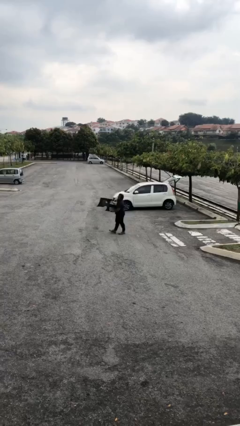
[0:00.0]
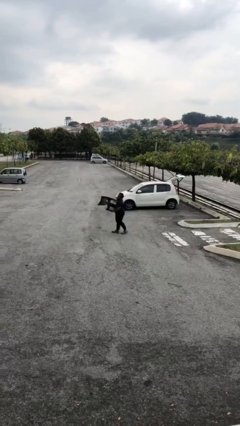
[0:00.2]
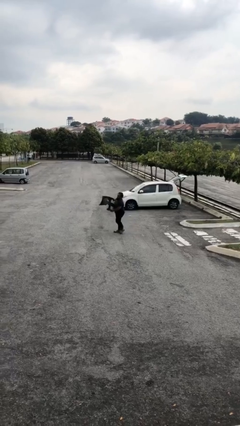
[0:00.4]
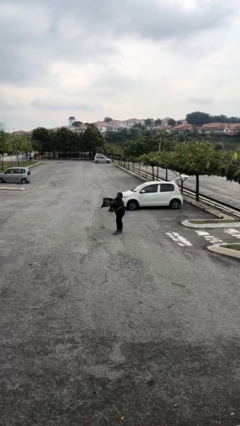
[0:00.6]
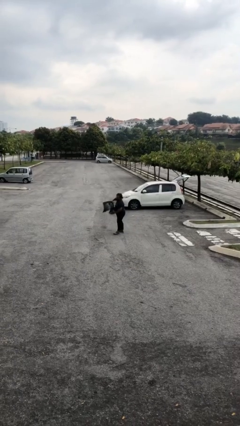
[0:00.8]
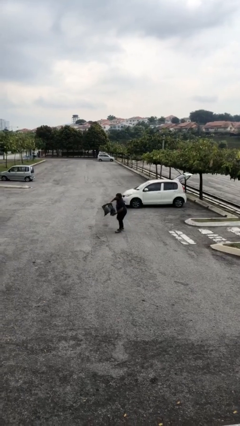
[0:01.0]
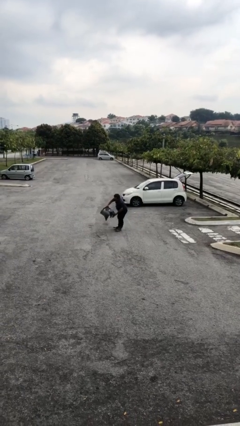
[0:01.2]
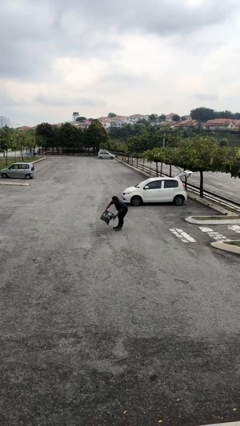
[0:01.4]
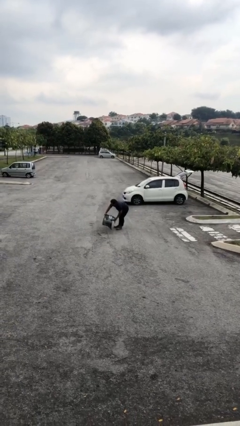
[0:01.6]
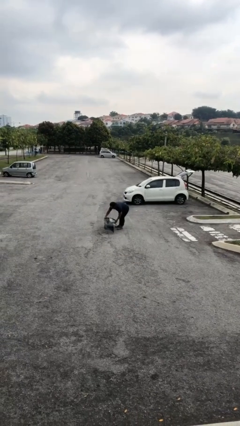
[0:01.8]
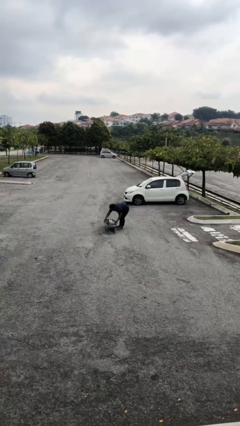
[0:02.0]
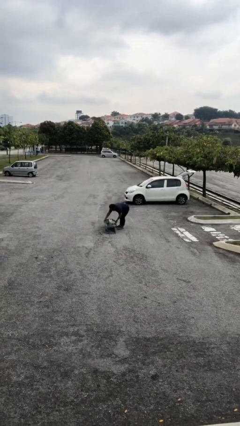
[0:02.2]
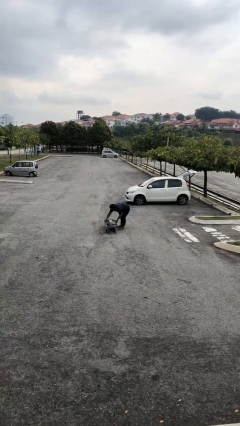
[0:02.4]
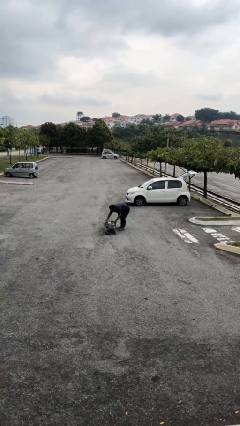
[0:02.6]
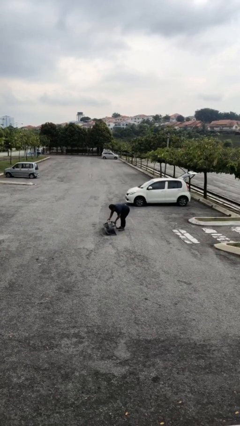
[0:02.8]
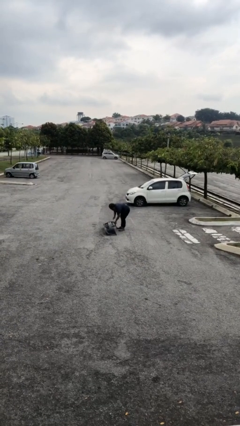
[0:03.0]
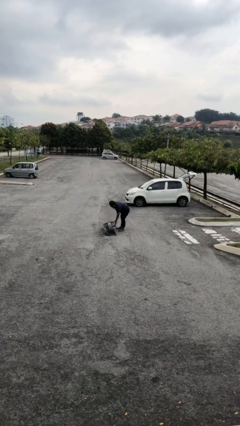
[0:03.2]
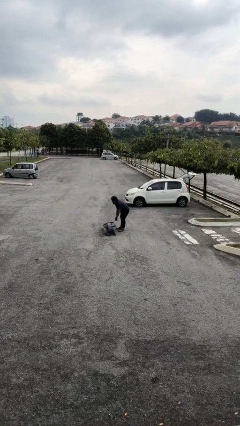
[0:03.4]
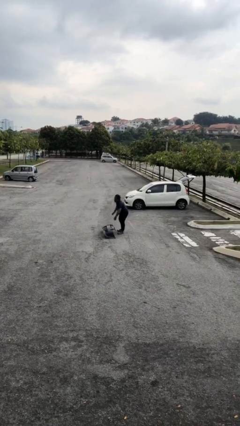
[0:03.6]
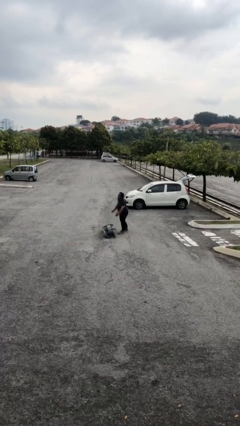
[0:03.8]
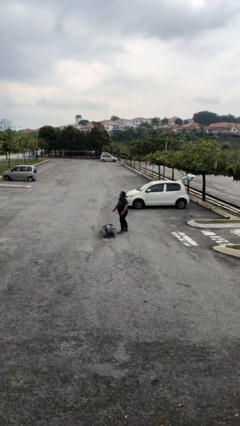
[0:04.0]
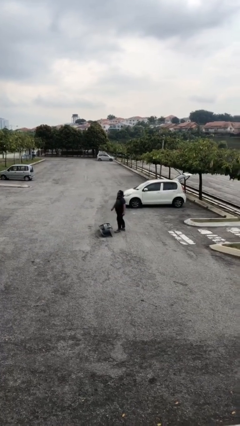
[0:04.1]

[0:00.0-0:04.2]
person puts down object on floor

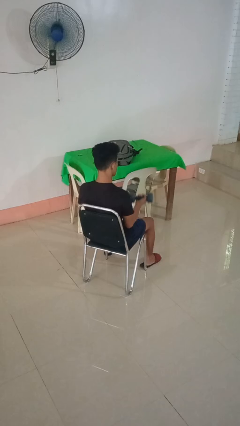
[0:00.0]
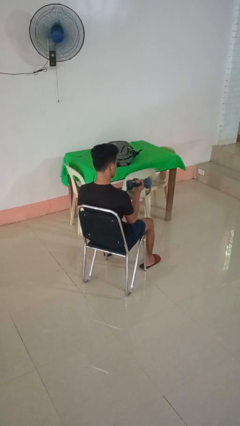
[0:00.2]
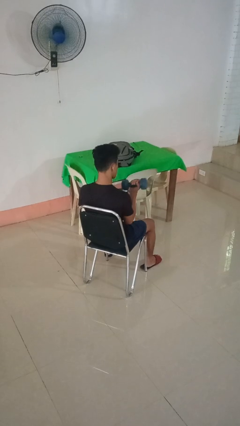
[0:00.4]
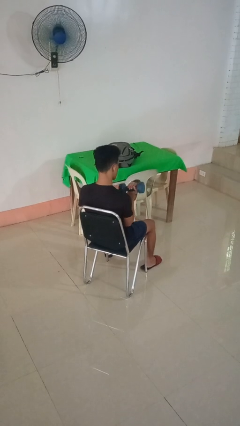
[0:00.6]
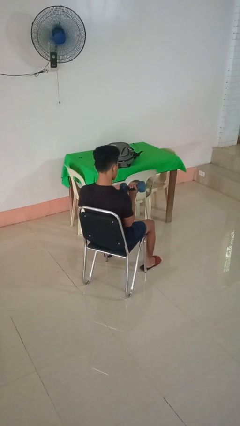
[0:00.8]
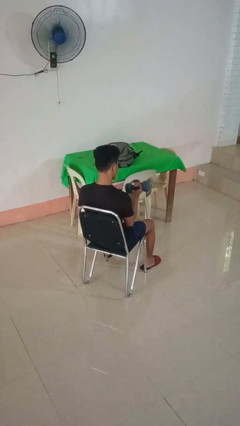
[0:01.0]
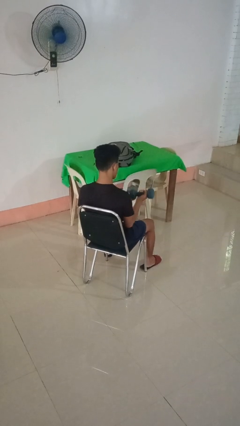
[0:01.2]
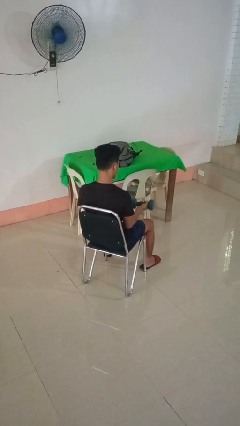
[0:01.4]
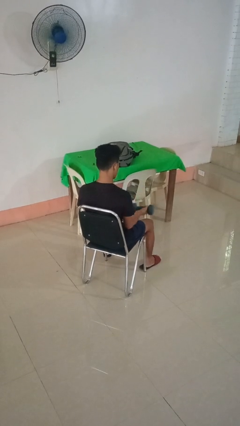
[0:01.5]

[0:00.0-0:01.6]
person lifts dumbbells

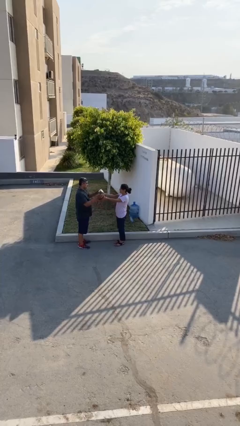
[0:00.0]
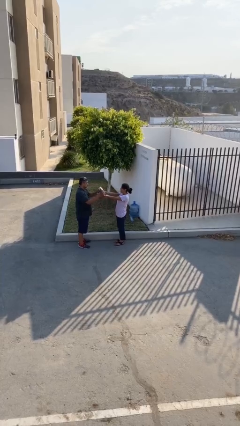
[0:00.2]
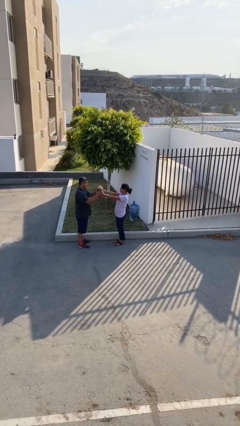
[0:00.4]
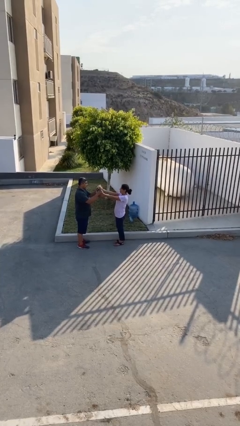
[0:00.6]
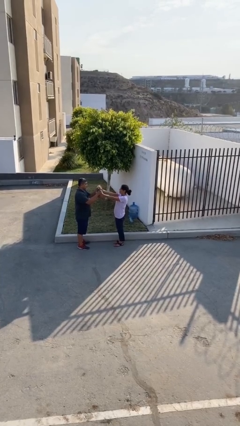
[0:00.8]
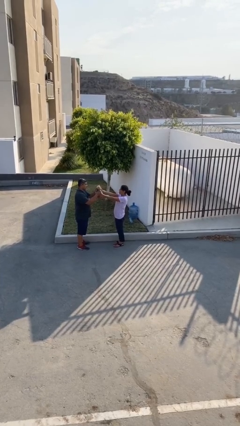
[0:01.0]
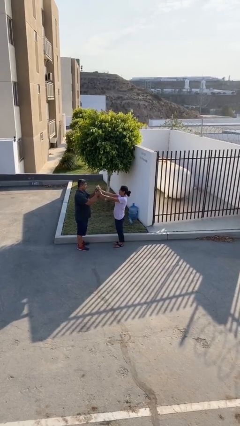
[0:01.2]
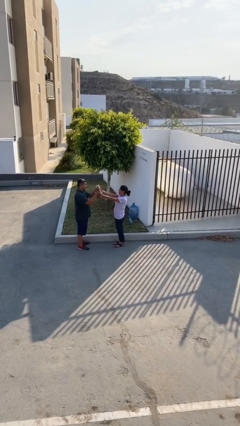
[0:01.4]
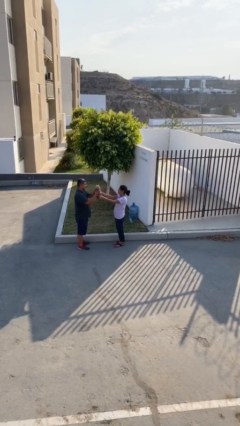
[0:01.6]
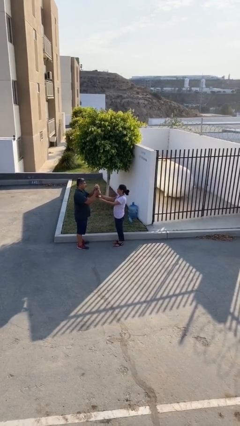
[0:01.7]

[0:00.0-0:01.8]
person transfers object to person

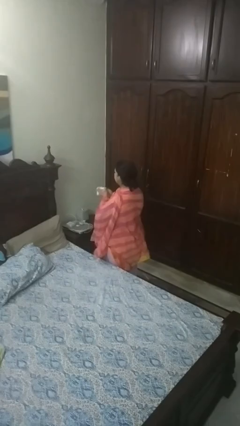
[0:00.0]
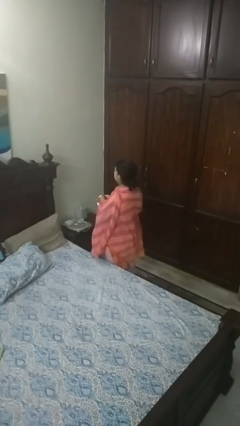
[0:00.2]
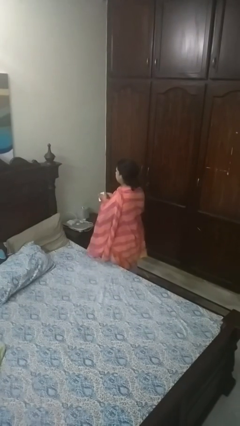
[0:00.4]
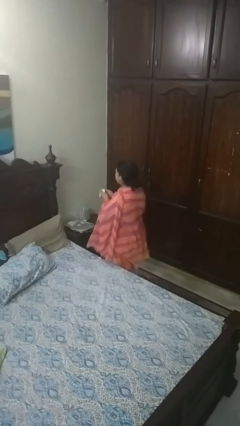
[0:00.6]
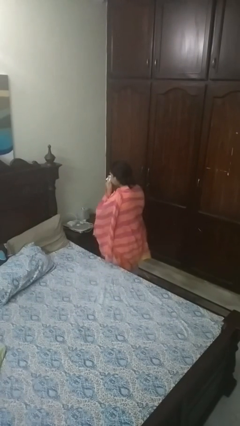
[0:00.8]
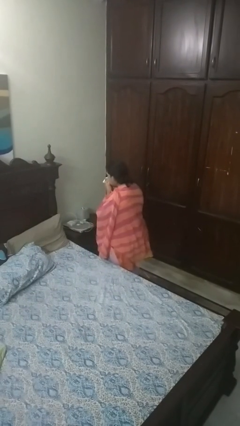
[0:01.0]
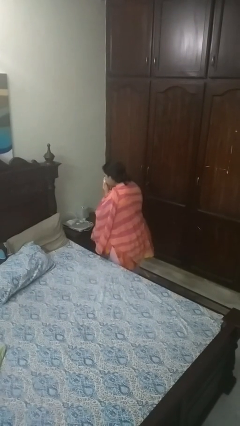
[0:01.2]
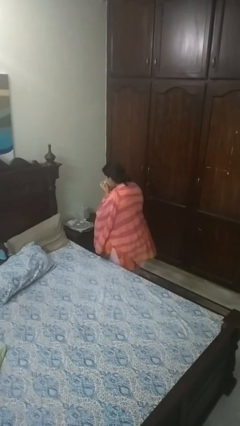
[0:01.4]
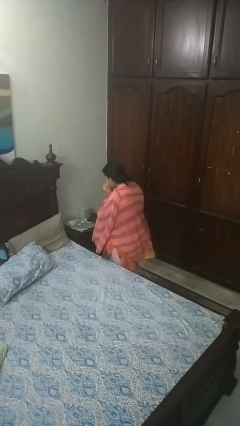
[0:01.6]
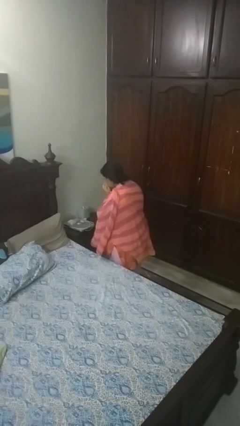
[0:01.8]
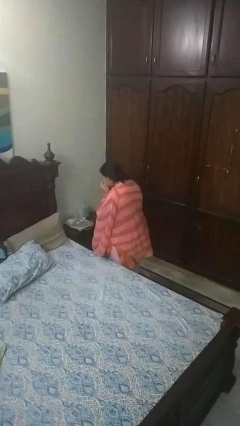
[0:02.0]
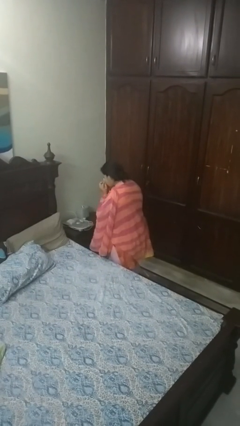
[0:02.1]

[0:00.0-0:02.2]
person blows nose

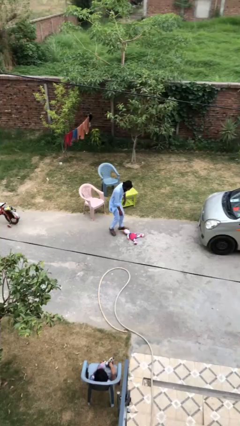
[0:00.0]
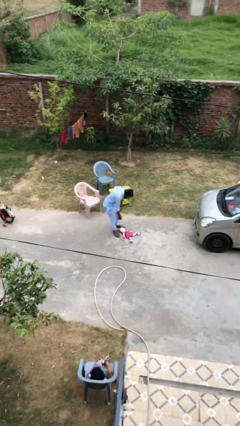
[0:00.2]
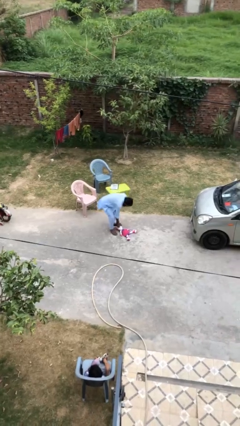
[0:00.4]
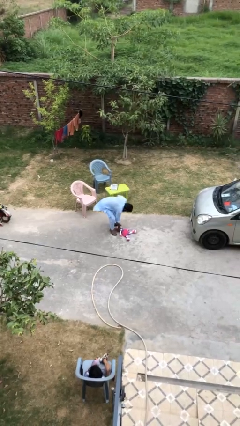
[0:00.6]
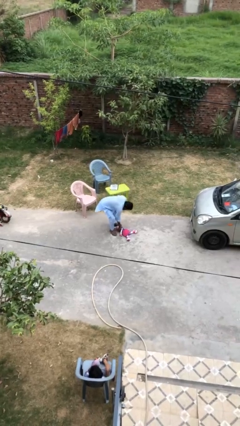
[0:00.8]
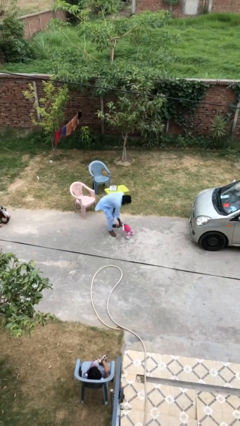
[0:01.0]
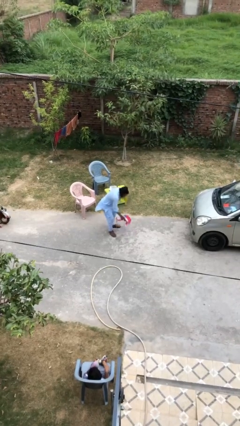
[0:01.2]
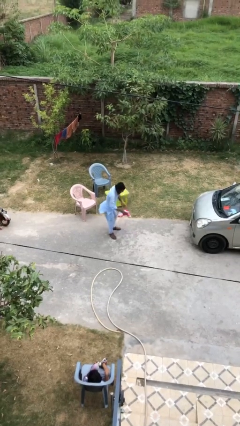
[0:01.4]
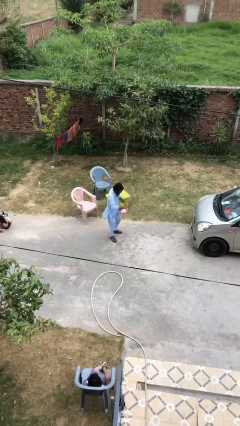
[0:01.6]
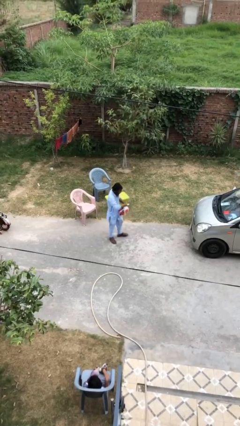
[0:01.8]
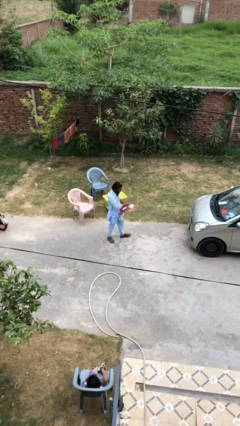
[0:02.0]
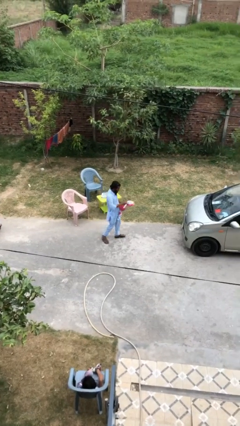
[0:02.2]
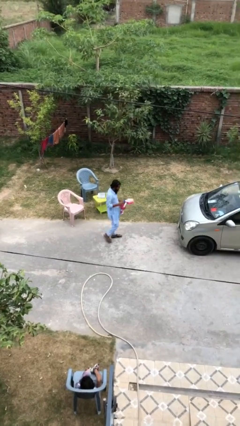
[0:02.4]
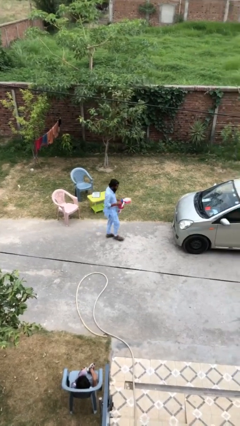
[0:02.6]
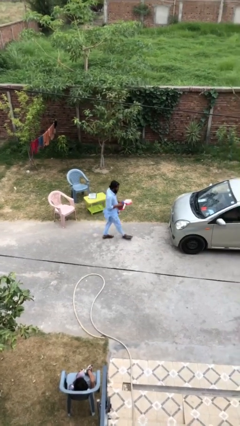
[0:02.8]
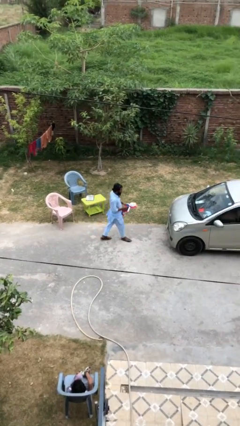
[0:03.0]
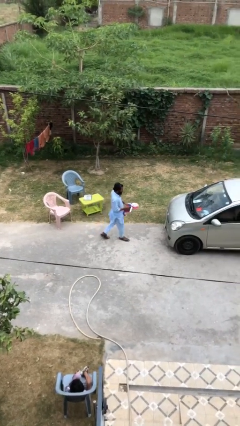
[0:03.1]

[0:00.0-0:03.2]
person picks up object from floor

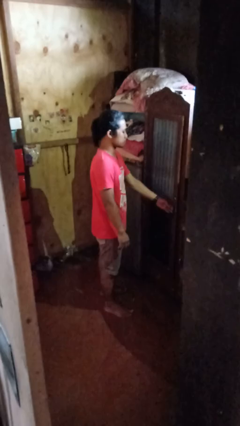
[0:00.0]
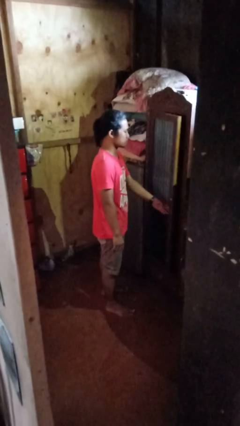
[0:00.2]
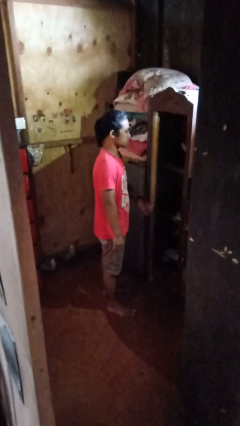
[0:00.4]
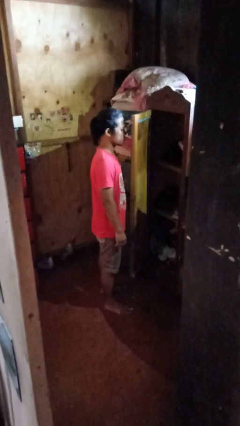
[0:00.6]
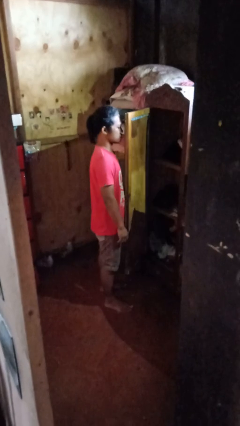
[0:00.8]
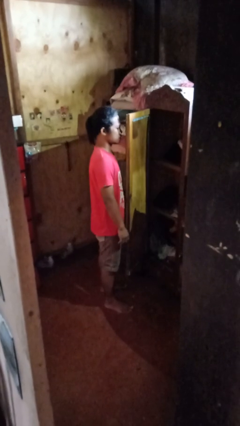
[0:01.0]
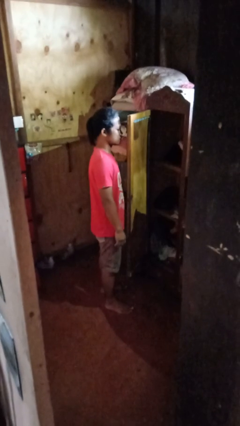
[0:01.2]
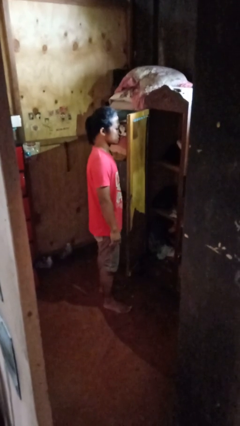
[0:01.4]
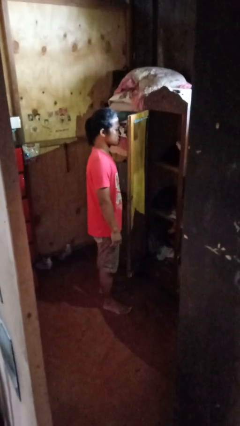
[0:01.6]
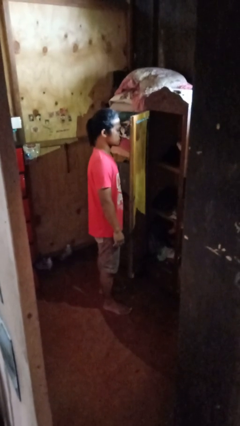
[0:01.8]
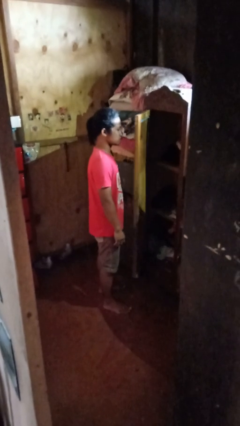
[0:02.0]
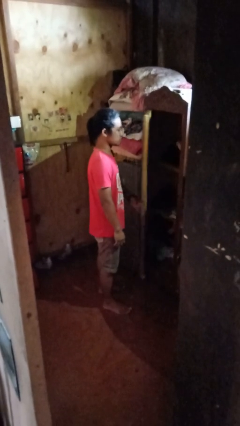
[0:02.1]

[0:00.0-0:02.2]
person opens closet door

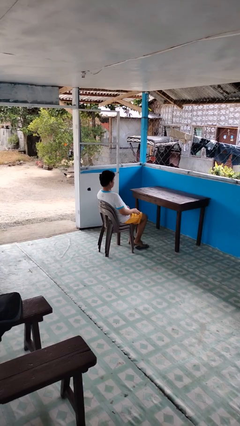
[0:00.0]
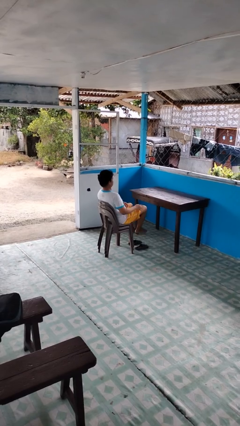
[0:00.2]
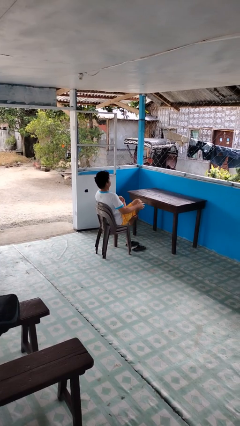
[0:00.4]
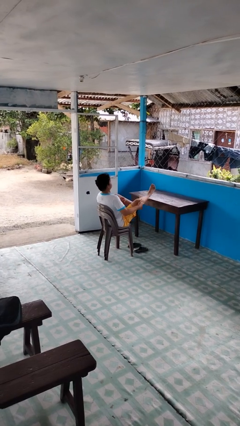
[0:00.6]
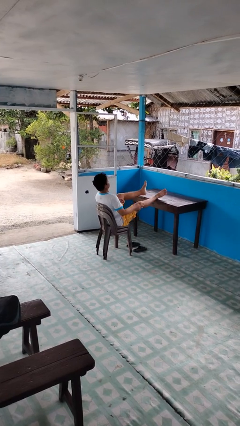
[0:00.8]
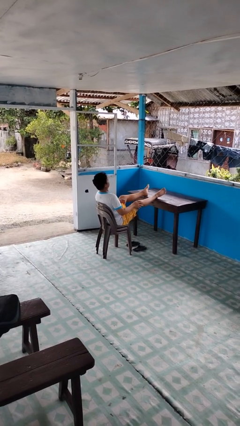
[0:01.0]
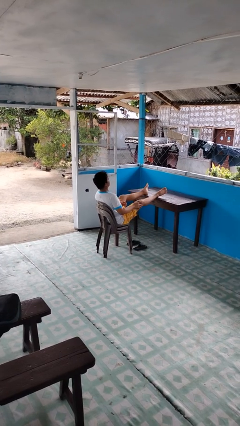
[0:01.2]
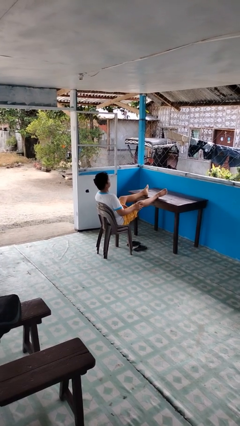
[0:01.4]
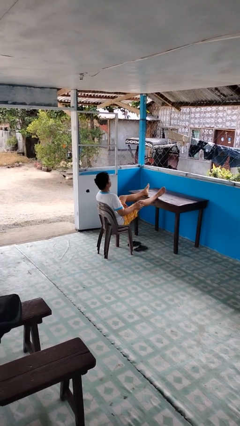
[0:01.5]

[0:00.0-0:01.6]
person puts feet up
